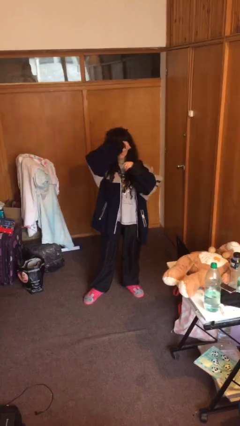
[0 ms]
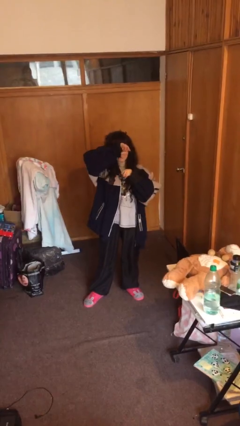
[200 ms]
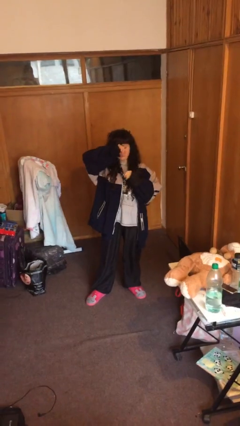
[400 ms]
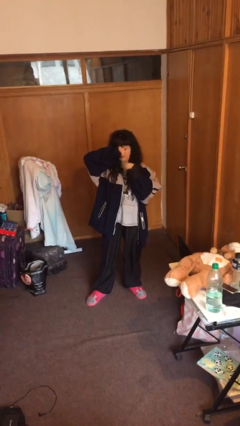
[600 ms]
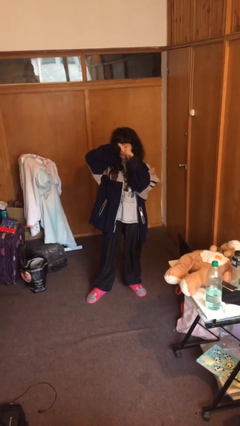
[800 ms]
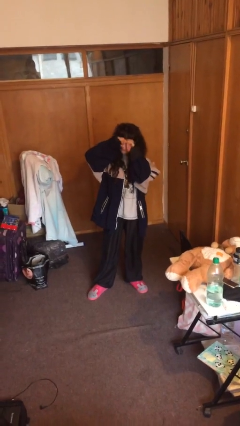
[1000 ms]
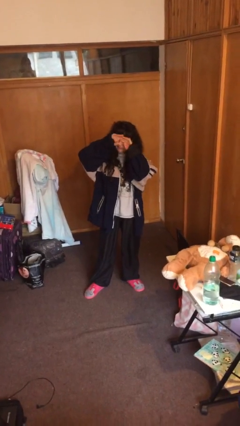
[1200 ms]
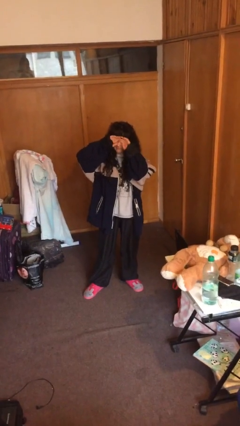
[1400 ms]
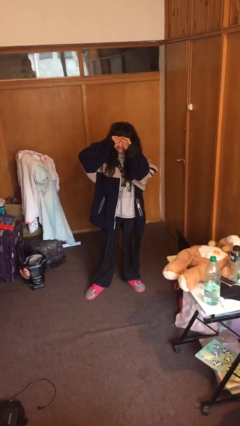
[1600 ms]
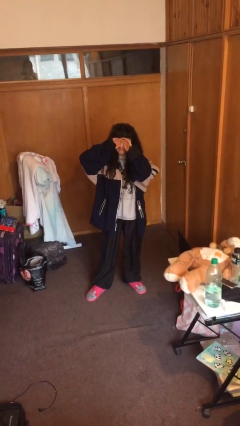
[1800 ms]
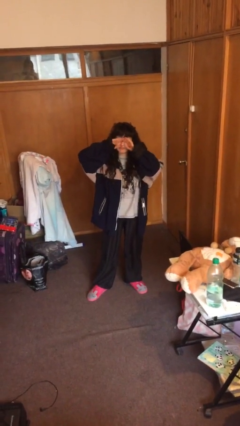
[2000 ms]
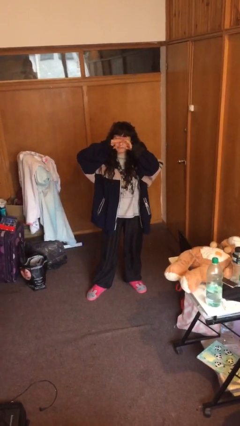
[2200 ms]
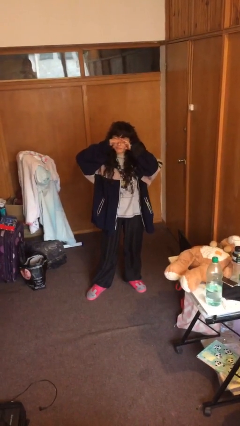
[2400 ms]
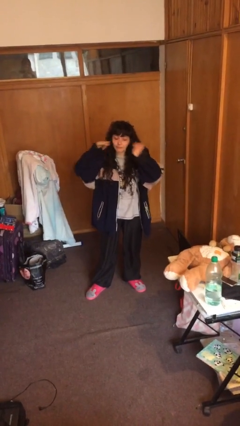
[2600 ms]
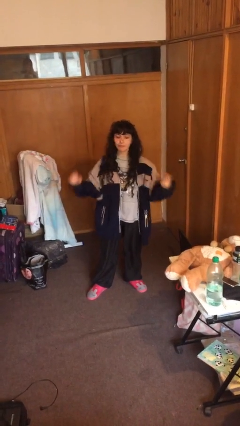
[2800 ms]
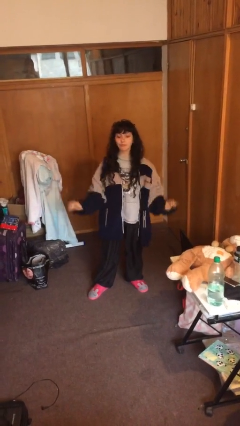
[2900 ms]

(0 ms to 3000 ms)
person rubs eyes

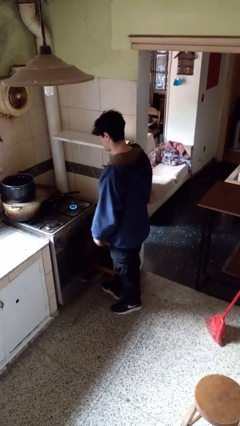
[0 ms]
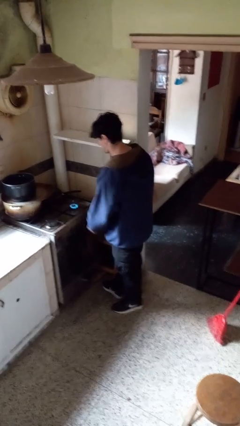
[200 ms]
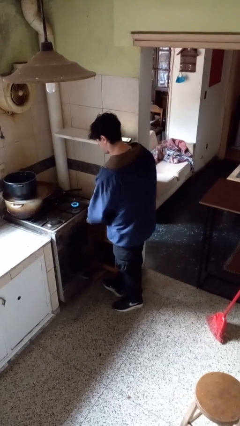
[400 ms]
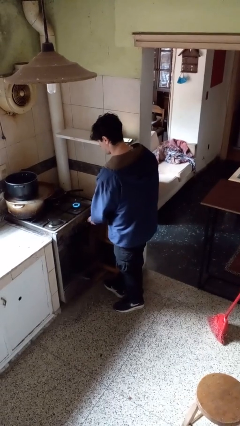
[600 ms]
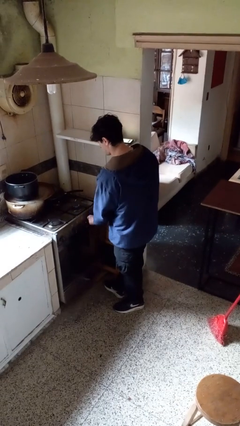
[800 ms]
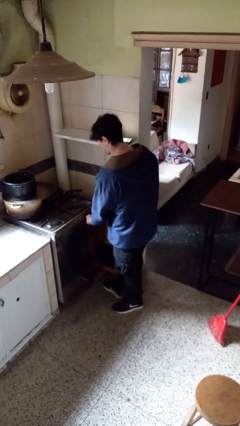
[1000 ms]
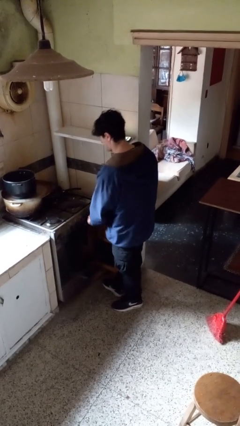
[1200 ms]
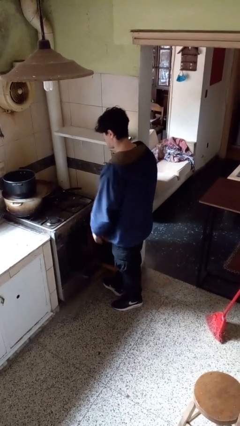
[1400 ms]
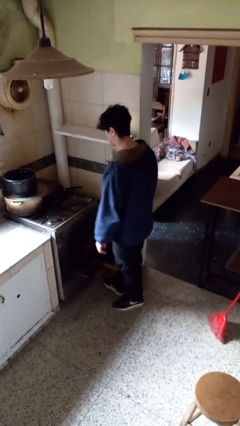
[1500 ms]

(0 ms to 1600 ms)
person turns off stovetop

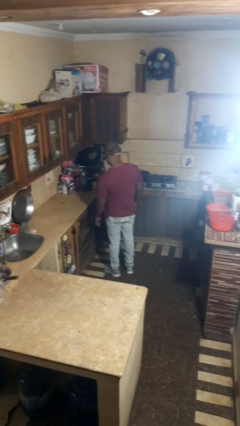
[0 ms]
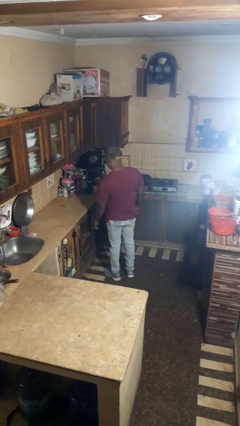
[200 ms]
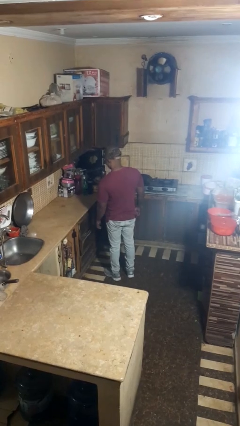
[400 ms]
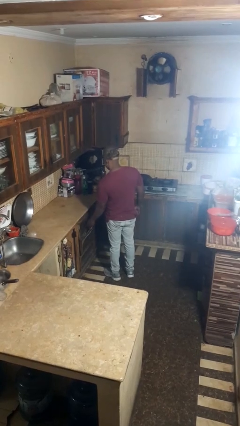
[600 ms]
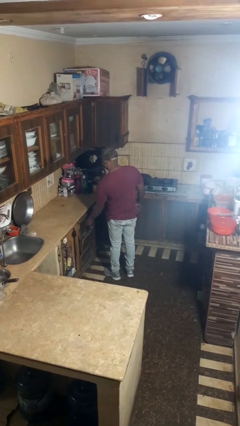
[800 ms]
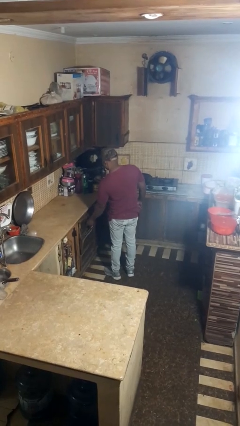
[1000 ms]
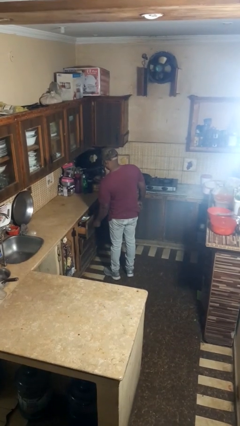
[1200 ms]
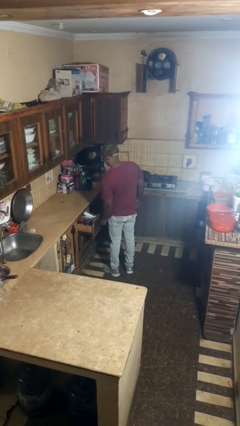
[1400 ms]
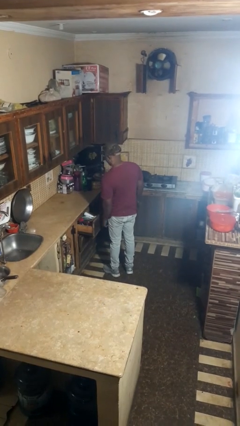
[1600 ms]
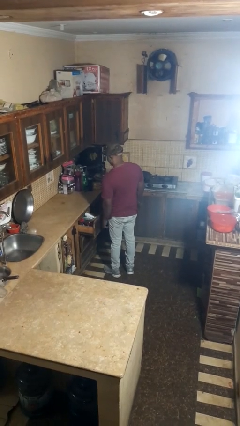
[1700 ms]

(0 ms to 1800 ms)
person opens kitchen drawer

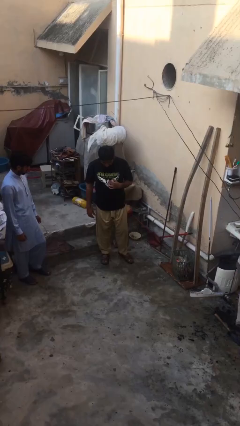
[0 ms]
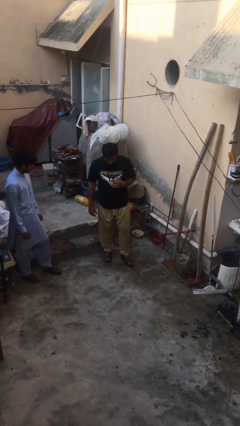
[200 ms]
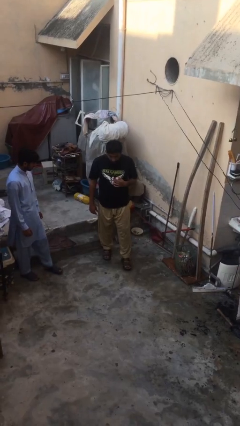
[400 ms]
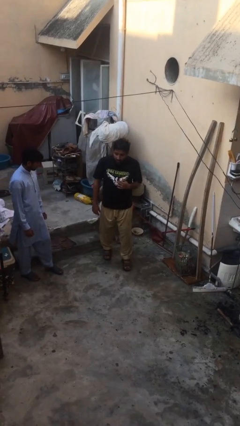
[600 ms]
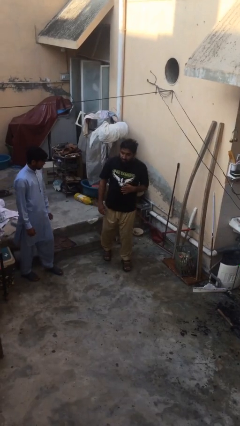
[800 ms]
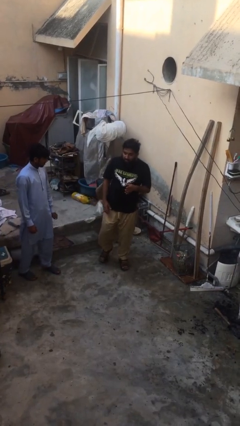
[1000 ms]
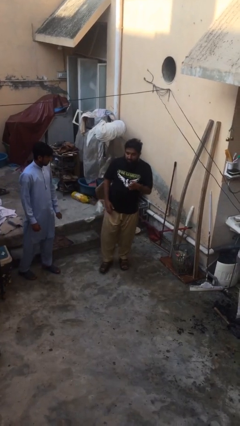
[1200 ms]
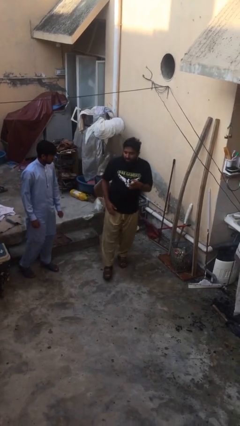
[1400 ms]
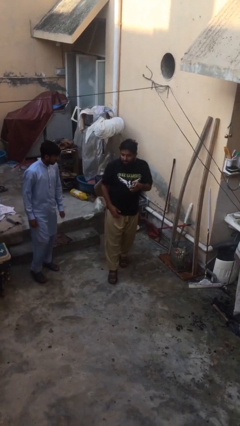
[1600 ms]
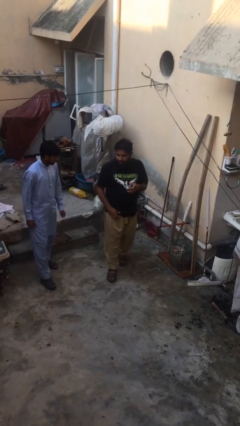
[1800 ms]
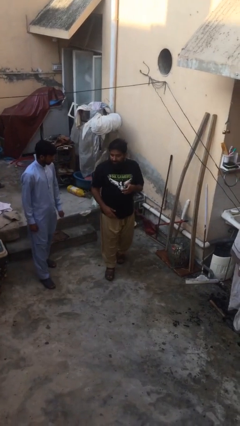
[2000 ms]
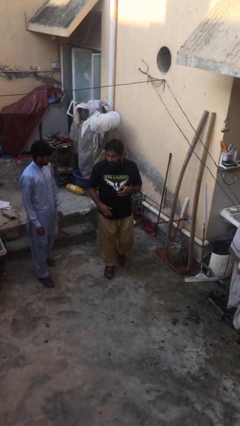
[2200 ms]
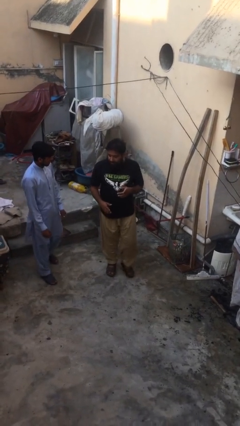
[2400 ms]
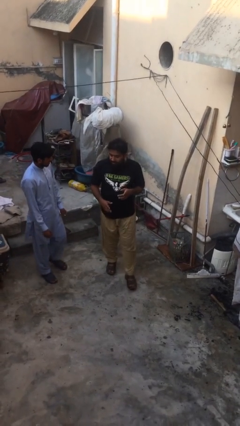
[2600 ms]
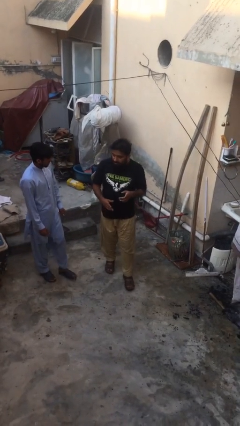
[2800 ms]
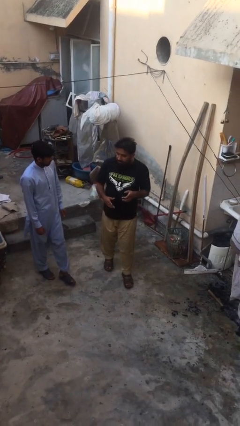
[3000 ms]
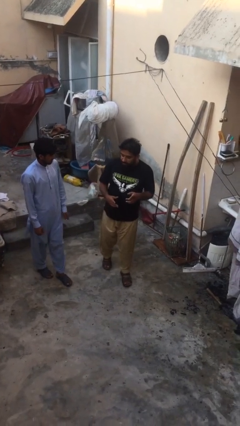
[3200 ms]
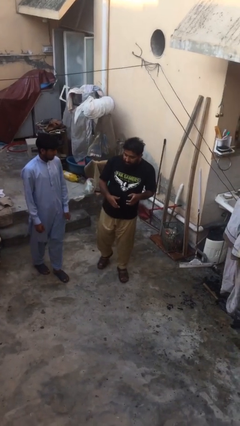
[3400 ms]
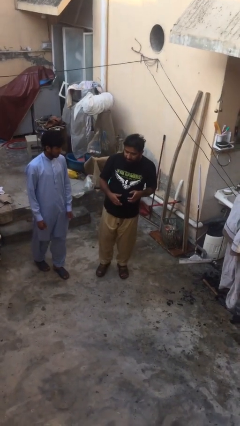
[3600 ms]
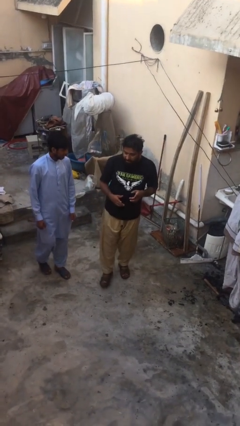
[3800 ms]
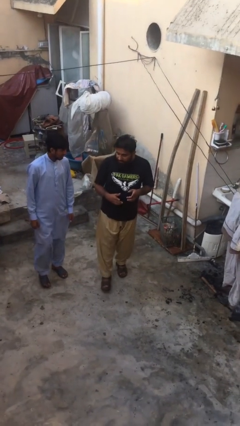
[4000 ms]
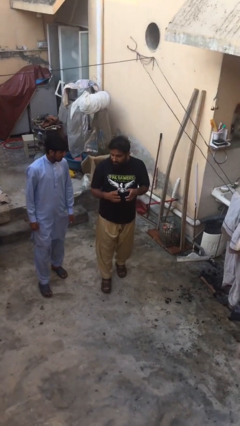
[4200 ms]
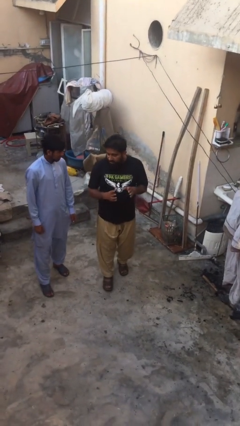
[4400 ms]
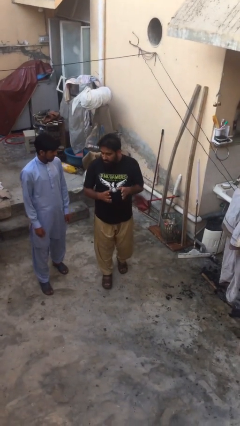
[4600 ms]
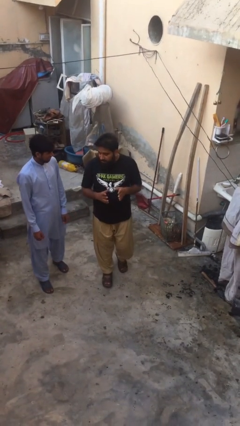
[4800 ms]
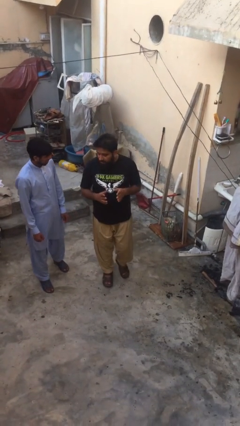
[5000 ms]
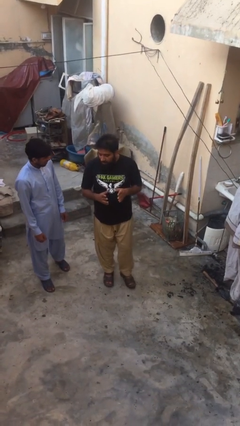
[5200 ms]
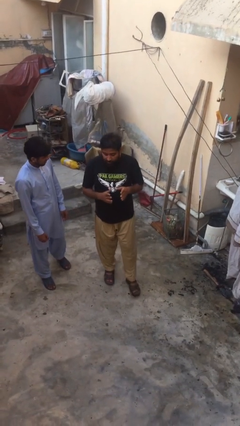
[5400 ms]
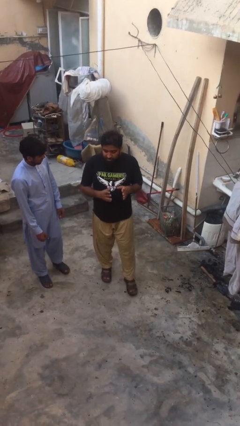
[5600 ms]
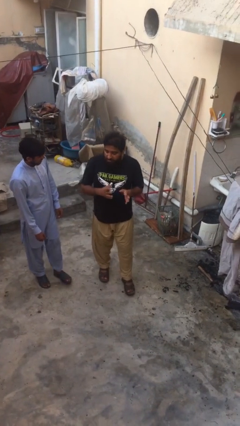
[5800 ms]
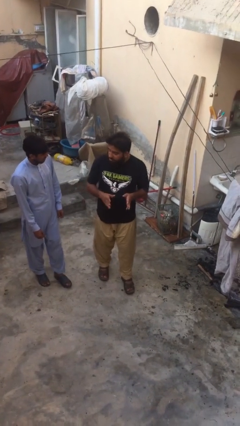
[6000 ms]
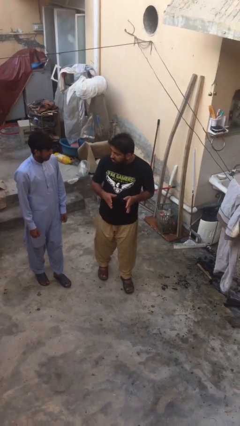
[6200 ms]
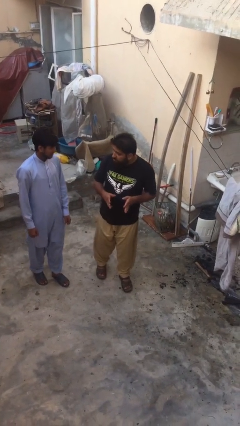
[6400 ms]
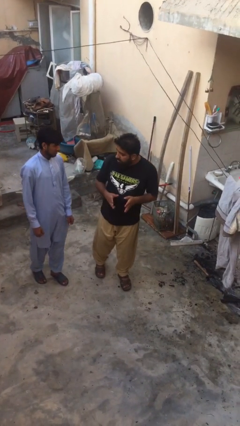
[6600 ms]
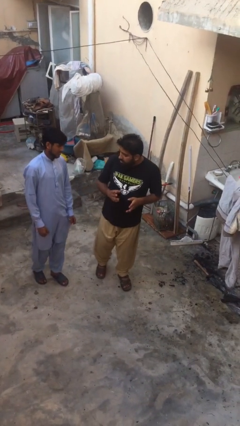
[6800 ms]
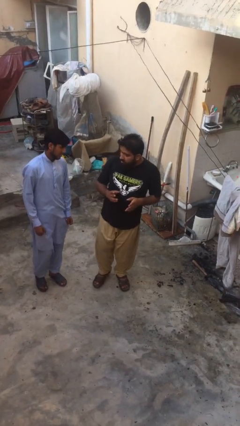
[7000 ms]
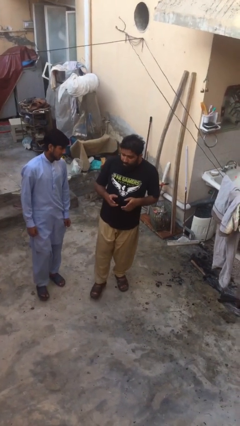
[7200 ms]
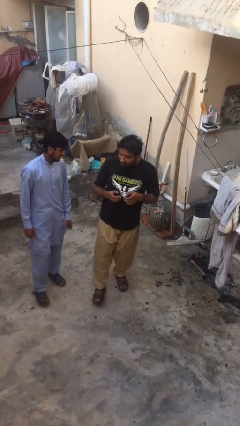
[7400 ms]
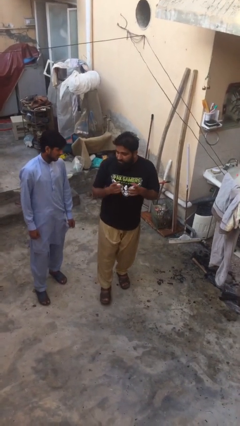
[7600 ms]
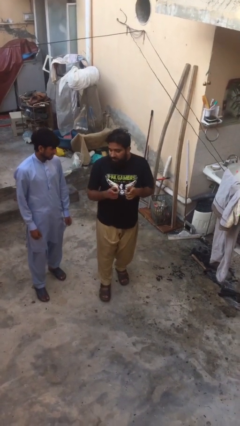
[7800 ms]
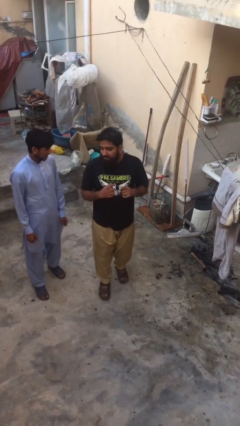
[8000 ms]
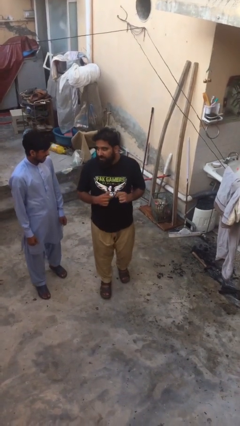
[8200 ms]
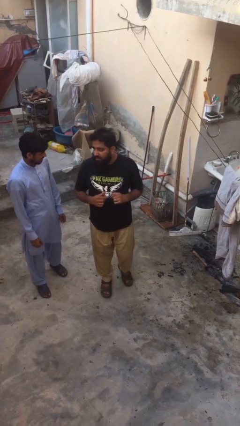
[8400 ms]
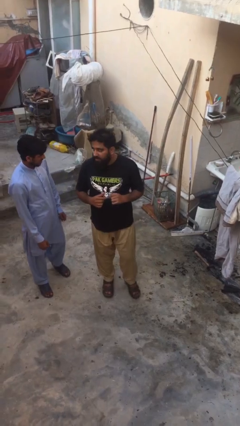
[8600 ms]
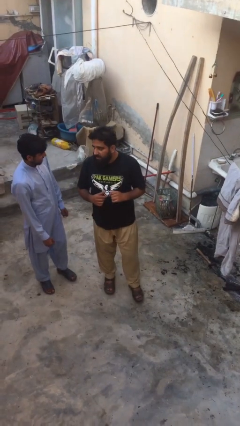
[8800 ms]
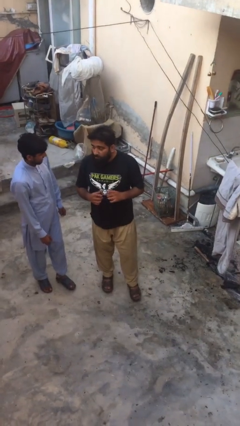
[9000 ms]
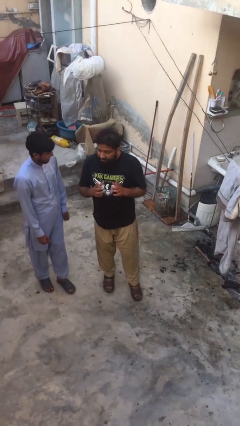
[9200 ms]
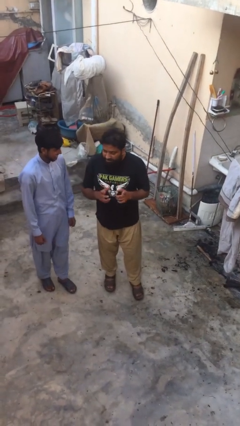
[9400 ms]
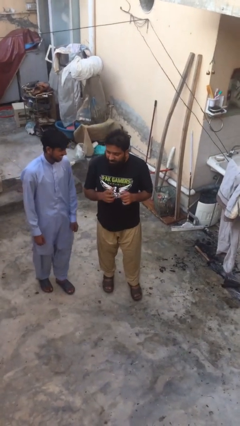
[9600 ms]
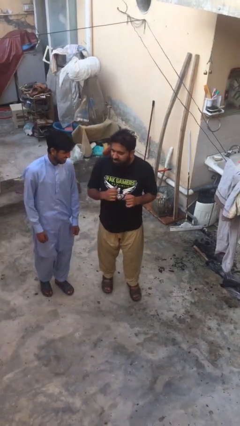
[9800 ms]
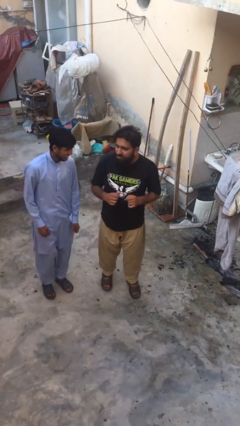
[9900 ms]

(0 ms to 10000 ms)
person talks to person

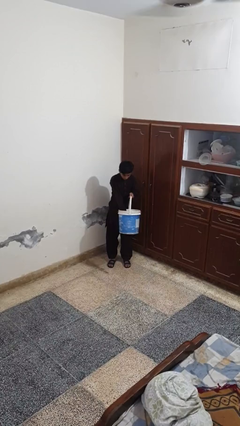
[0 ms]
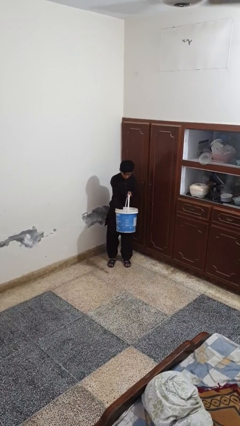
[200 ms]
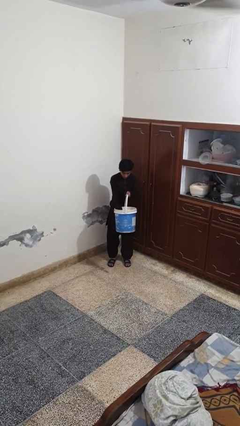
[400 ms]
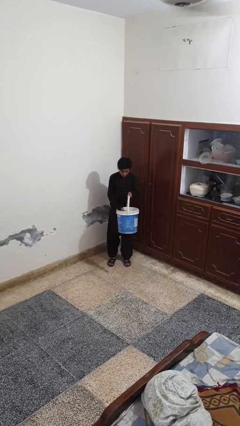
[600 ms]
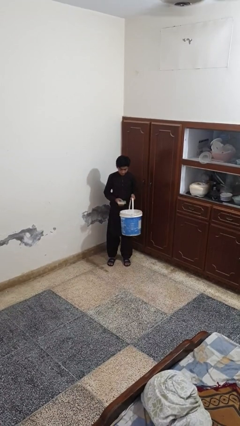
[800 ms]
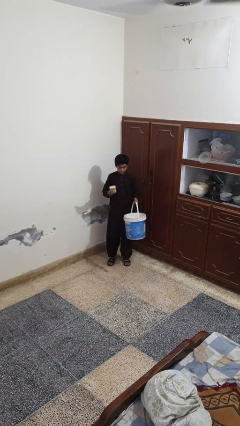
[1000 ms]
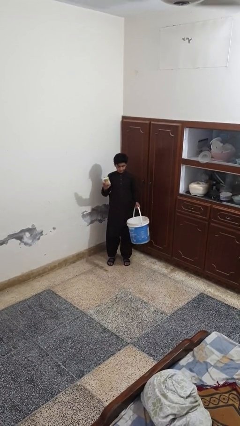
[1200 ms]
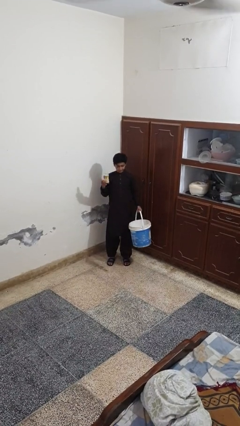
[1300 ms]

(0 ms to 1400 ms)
person takes object from basket
